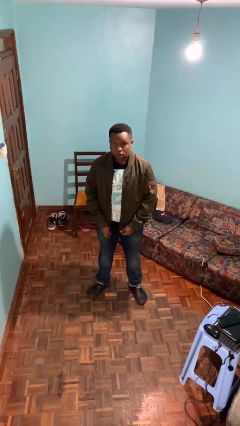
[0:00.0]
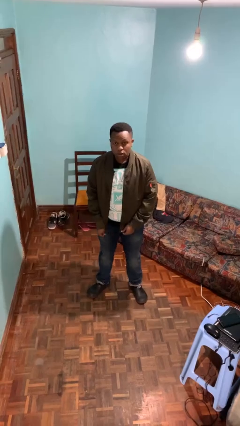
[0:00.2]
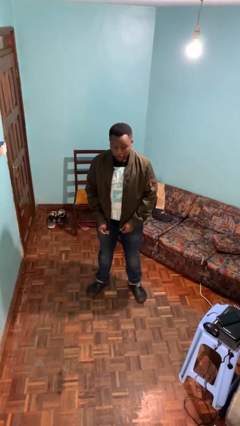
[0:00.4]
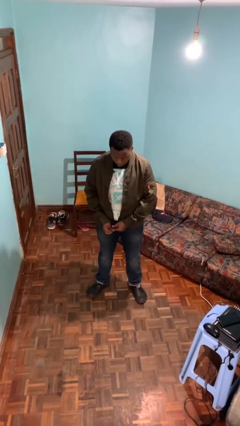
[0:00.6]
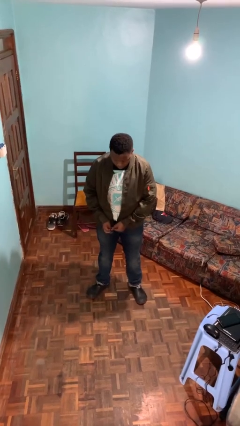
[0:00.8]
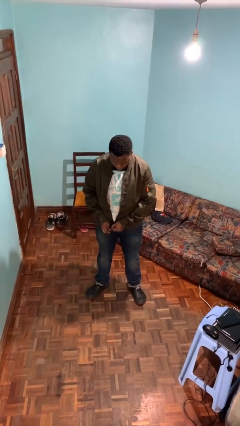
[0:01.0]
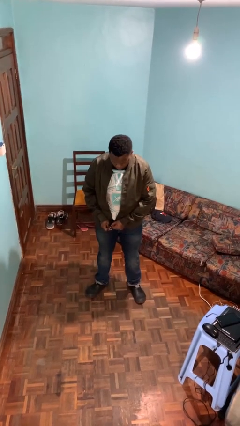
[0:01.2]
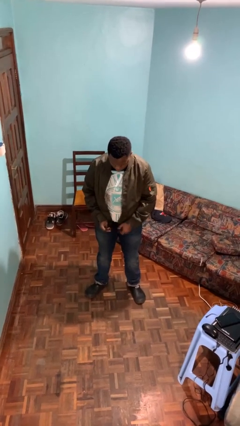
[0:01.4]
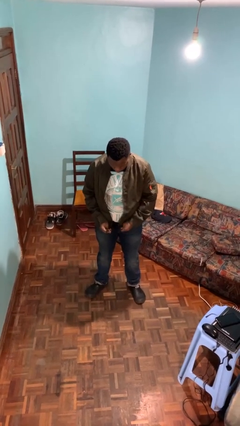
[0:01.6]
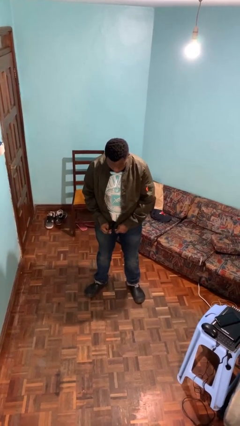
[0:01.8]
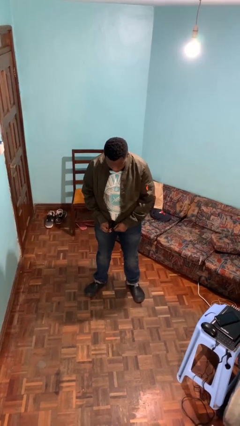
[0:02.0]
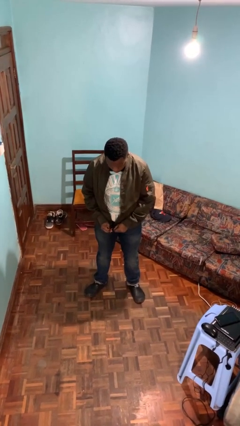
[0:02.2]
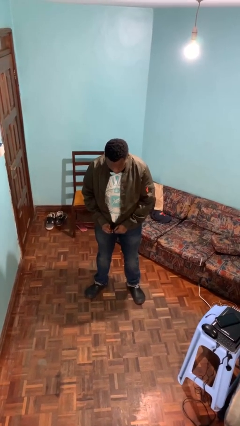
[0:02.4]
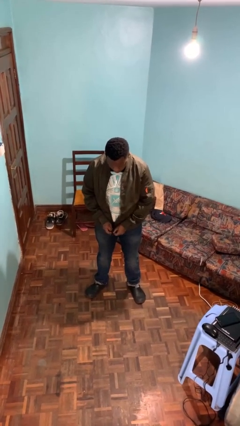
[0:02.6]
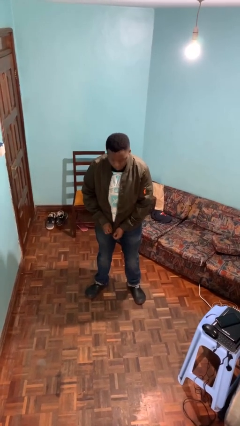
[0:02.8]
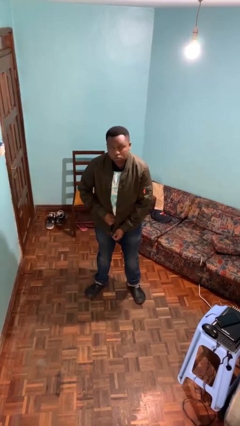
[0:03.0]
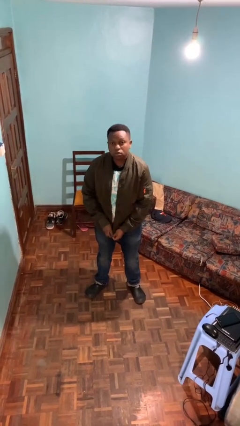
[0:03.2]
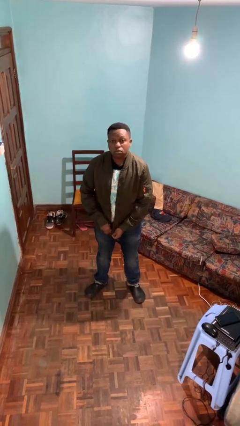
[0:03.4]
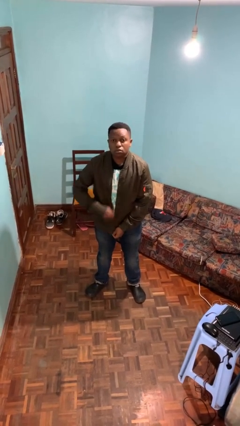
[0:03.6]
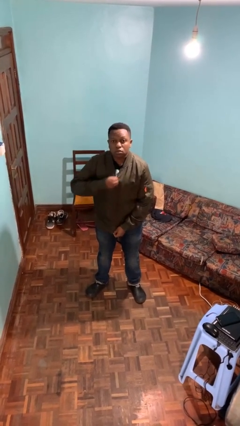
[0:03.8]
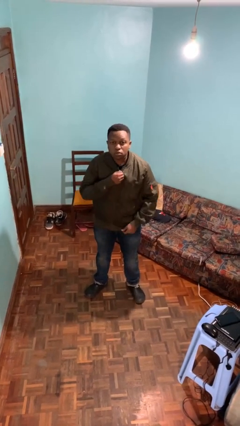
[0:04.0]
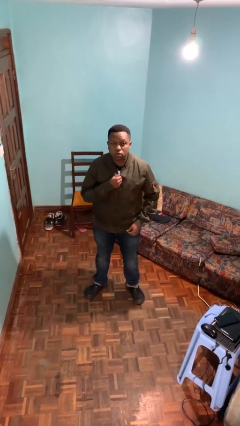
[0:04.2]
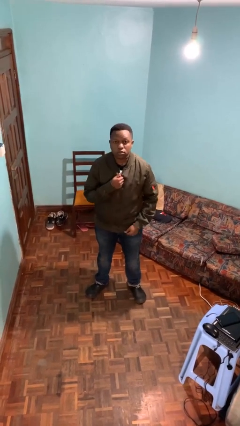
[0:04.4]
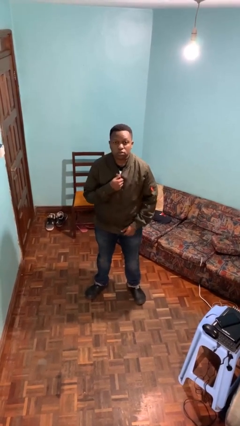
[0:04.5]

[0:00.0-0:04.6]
person zips up jacket

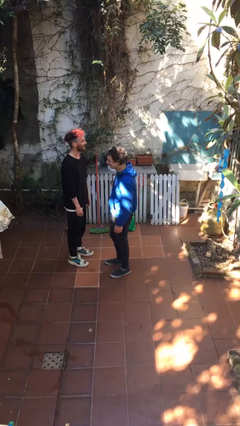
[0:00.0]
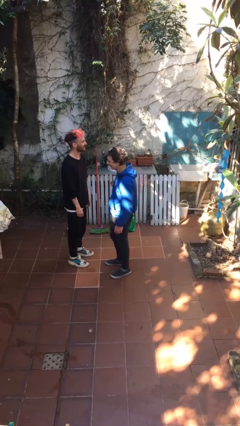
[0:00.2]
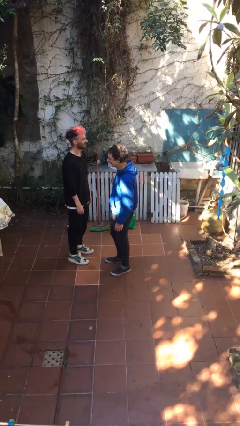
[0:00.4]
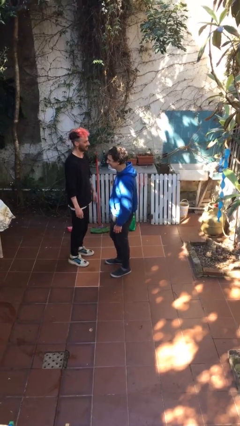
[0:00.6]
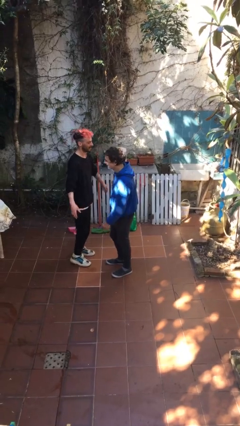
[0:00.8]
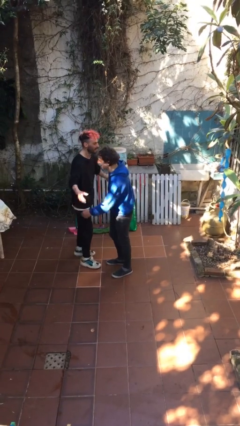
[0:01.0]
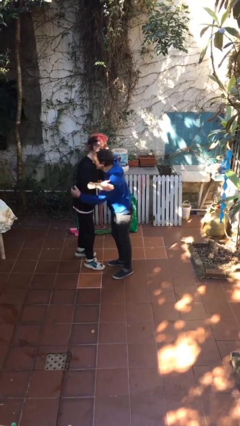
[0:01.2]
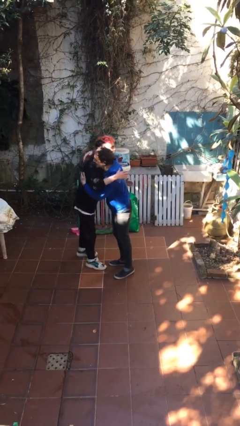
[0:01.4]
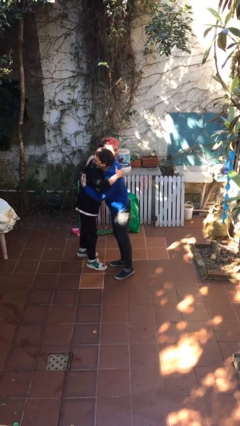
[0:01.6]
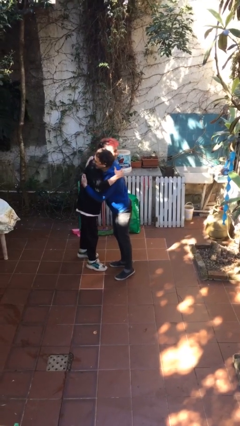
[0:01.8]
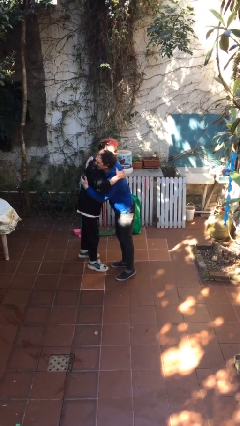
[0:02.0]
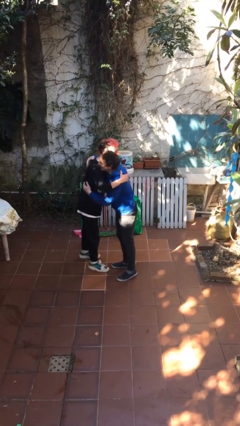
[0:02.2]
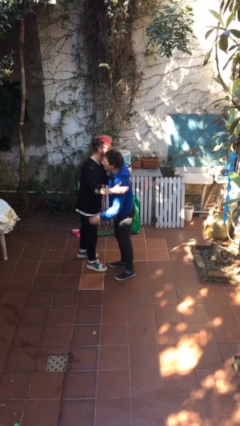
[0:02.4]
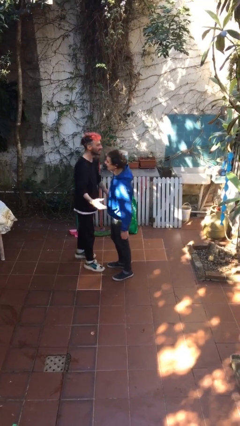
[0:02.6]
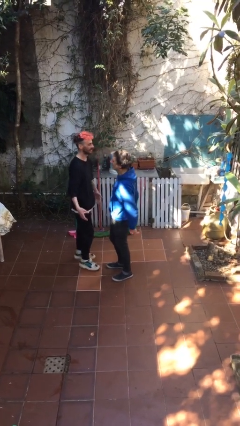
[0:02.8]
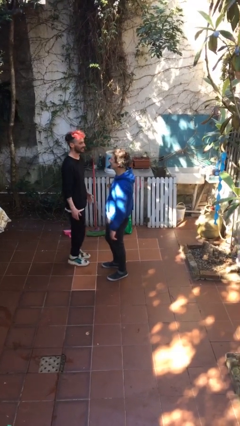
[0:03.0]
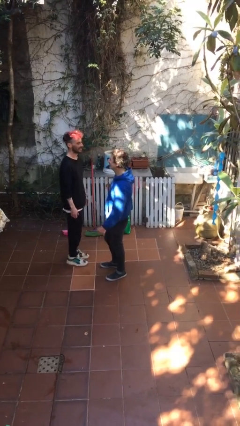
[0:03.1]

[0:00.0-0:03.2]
person embraces person

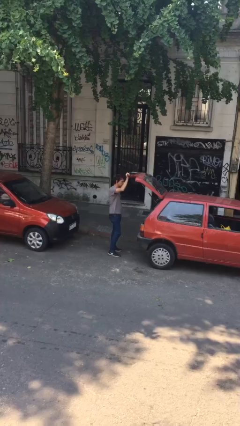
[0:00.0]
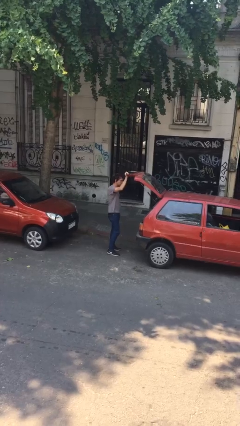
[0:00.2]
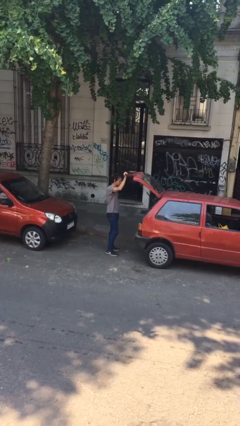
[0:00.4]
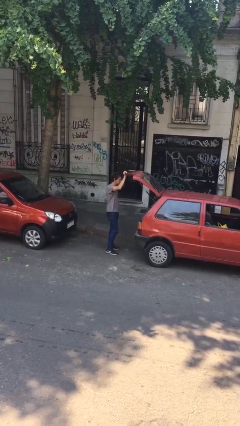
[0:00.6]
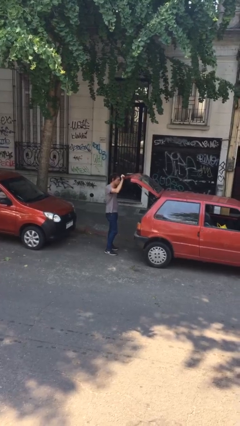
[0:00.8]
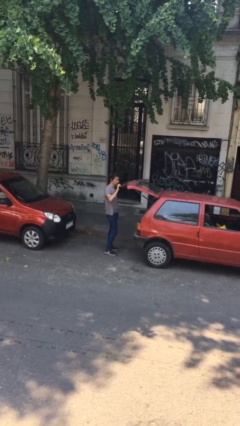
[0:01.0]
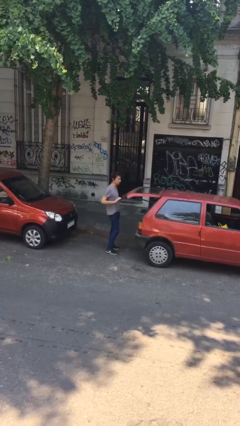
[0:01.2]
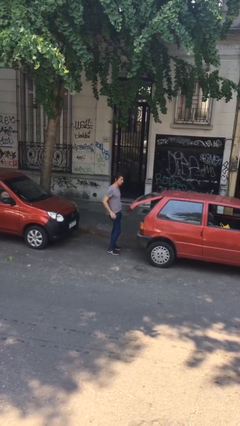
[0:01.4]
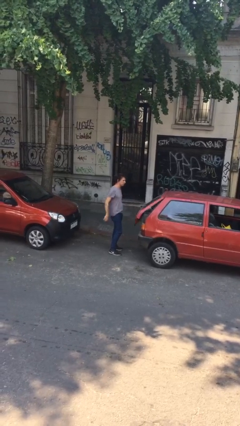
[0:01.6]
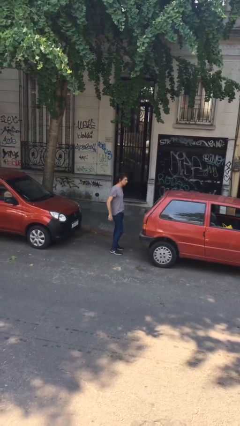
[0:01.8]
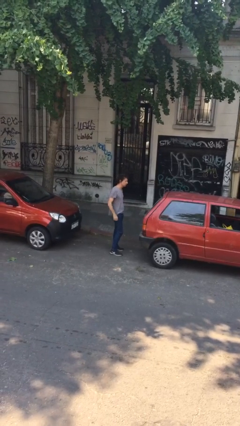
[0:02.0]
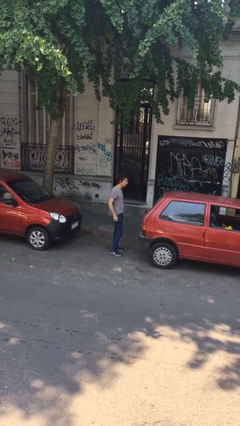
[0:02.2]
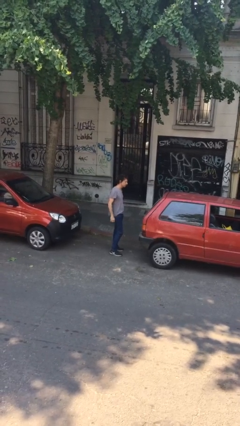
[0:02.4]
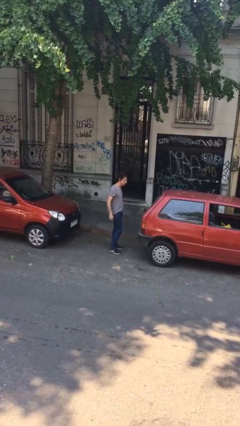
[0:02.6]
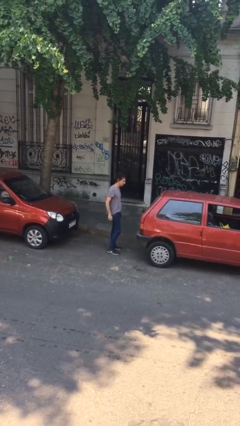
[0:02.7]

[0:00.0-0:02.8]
person closes car trunk

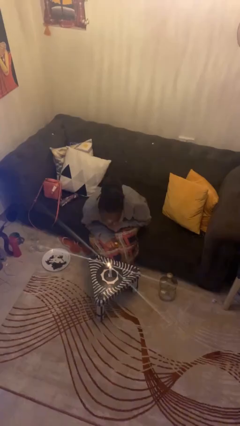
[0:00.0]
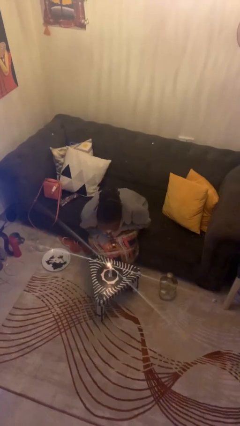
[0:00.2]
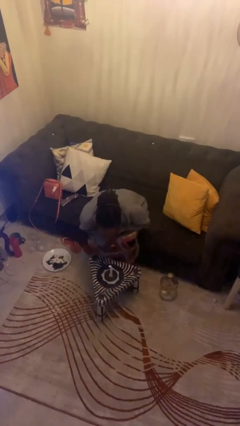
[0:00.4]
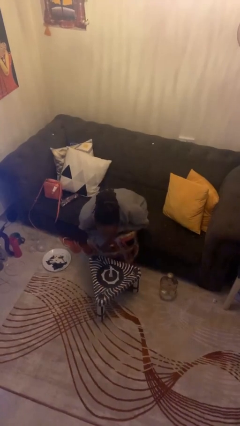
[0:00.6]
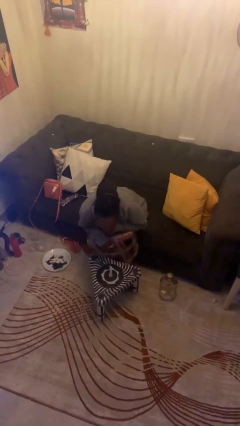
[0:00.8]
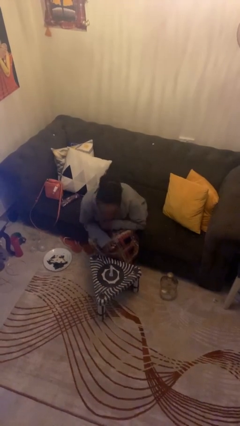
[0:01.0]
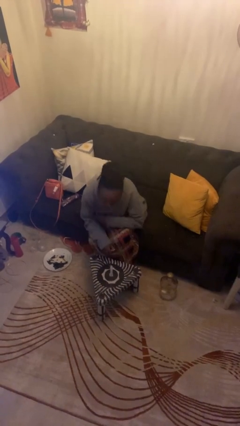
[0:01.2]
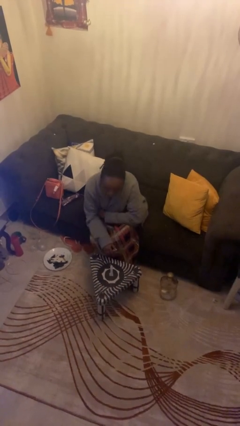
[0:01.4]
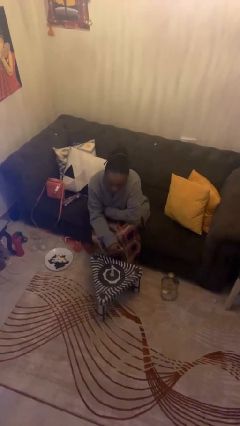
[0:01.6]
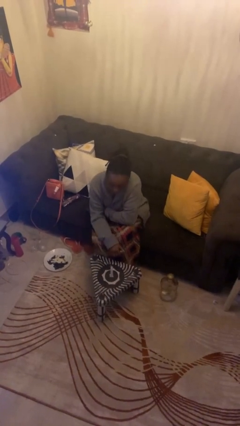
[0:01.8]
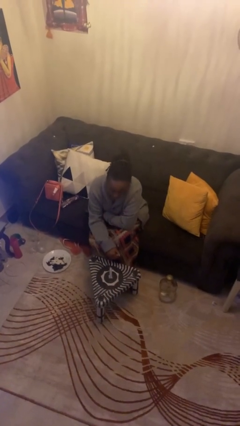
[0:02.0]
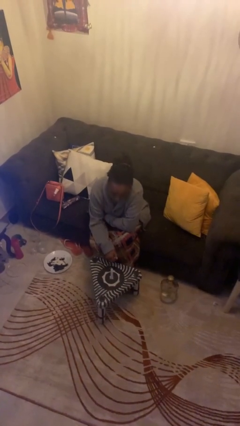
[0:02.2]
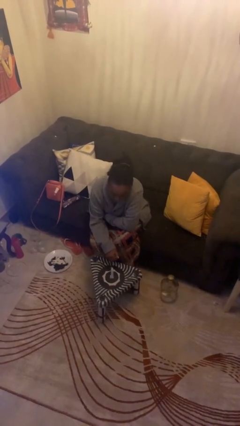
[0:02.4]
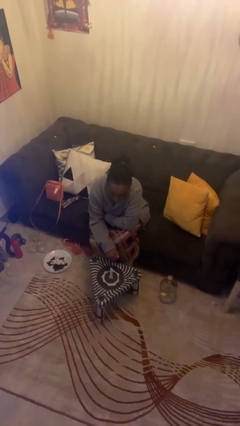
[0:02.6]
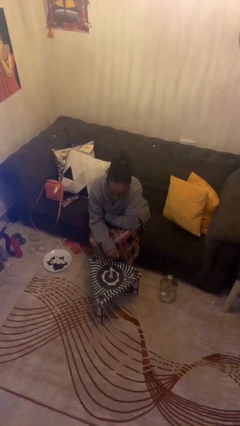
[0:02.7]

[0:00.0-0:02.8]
person extinguishes candle

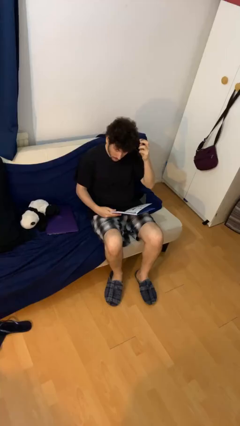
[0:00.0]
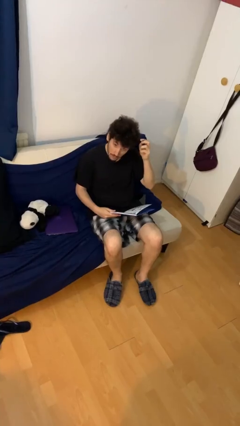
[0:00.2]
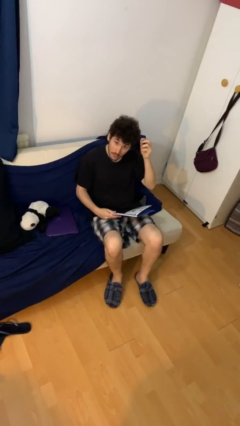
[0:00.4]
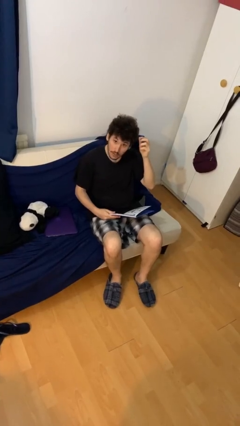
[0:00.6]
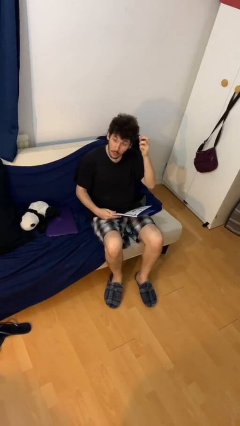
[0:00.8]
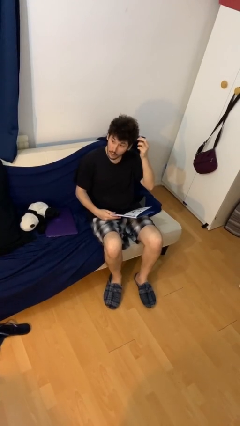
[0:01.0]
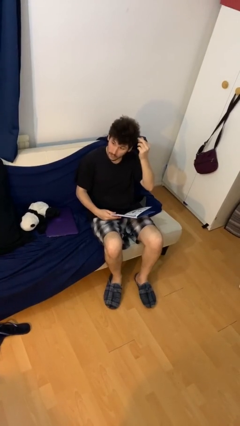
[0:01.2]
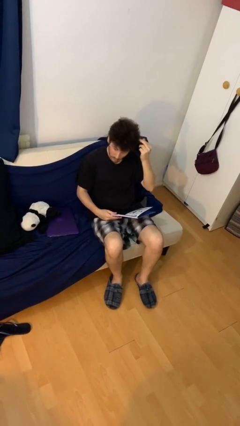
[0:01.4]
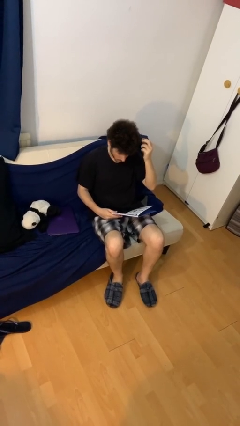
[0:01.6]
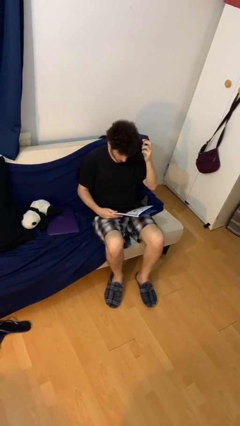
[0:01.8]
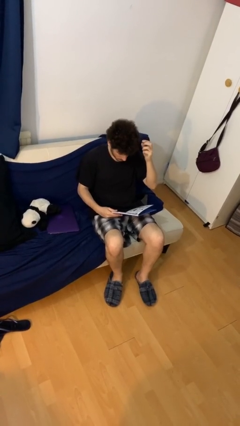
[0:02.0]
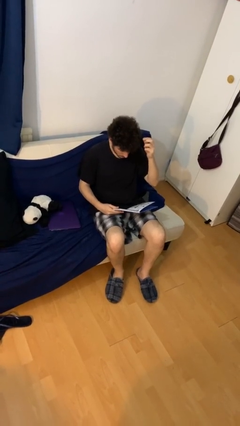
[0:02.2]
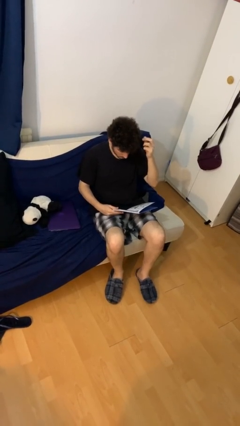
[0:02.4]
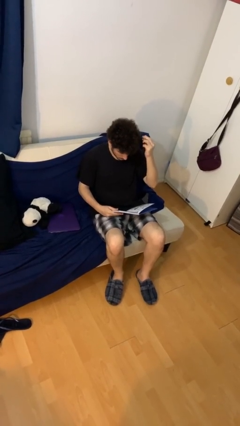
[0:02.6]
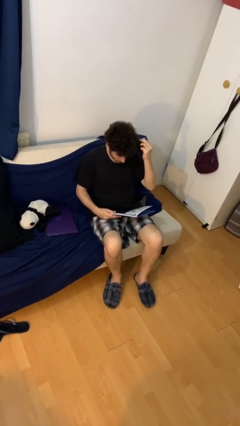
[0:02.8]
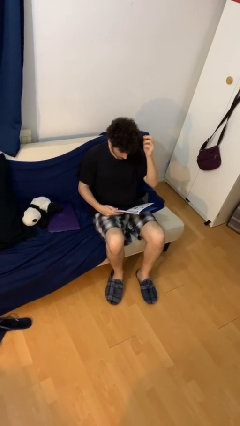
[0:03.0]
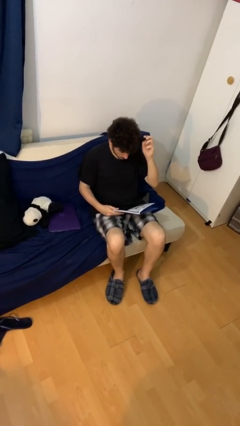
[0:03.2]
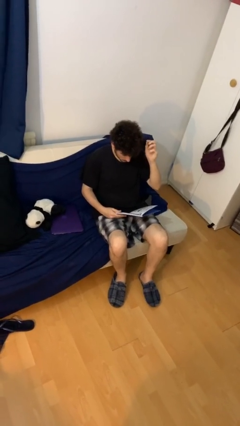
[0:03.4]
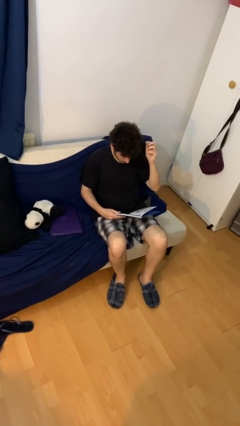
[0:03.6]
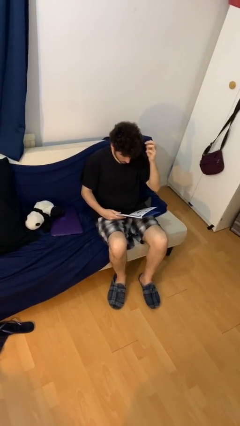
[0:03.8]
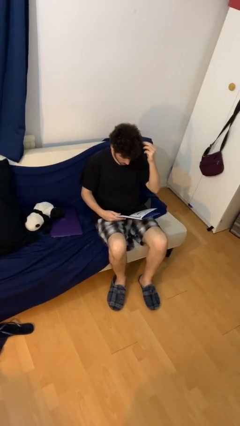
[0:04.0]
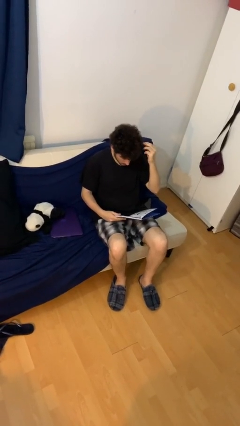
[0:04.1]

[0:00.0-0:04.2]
person reads document

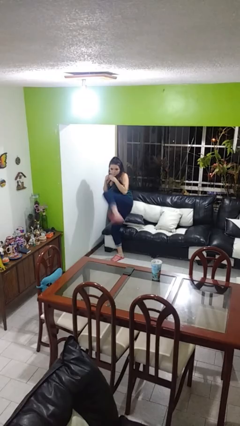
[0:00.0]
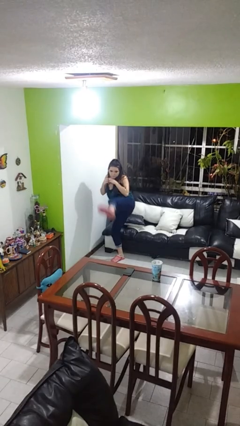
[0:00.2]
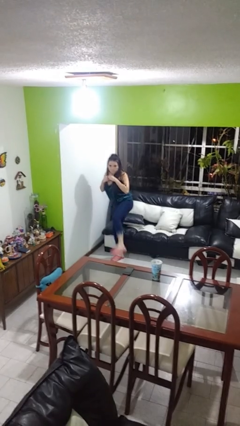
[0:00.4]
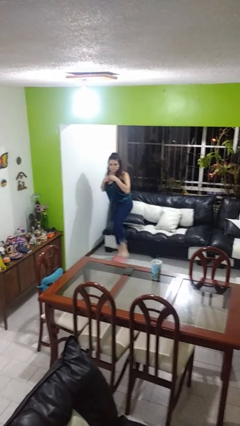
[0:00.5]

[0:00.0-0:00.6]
person karate kicks
